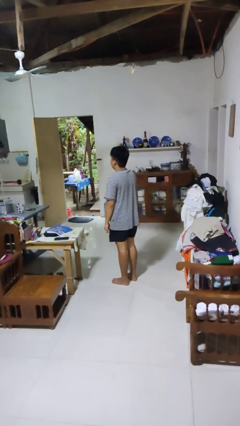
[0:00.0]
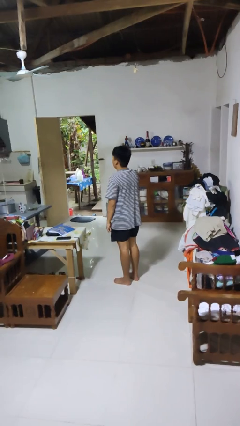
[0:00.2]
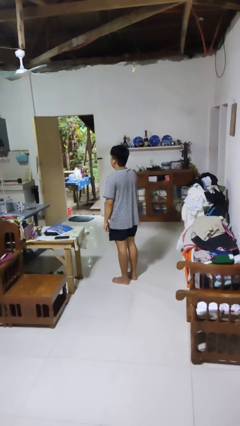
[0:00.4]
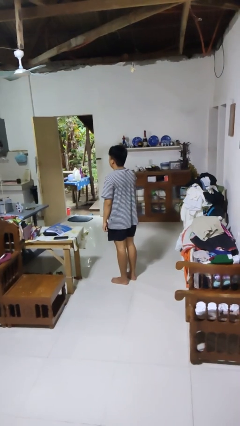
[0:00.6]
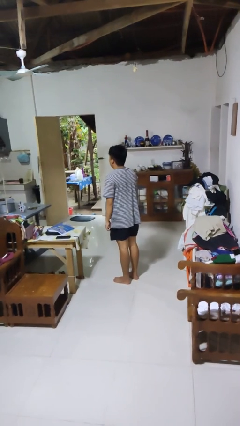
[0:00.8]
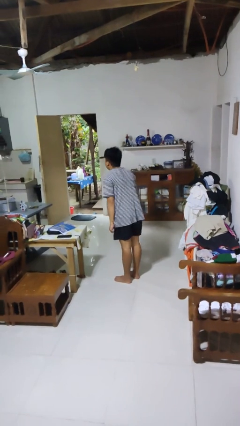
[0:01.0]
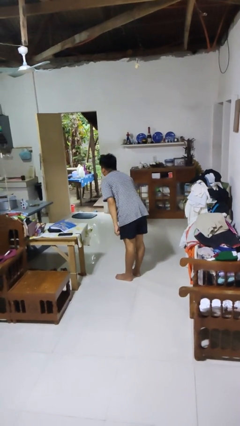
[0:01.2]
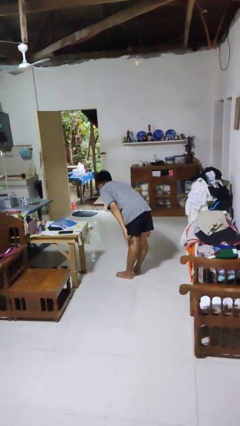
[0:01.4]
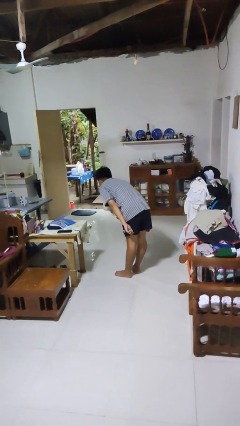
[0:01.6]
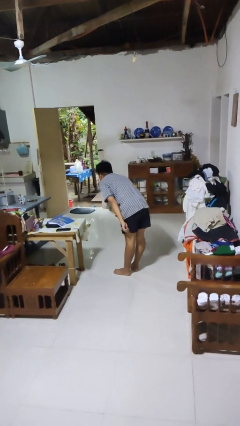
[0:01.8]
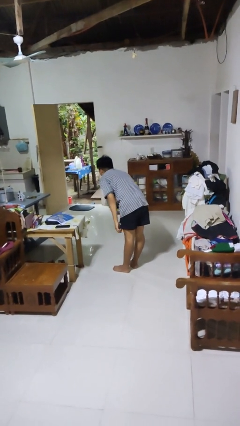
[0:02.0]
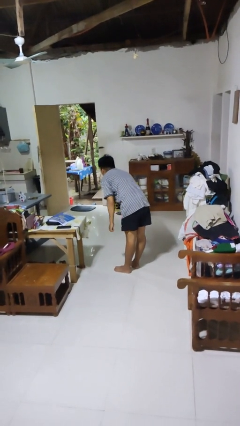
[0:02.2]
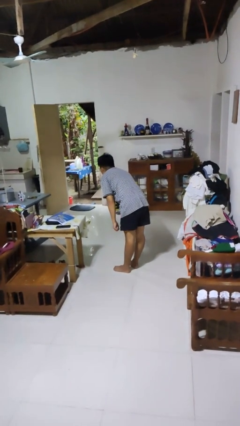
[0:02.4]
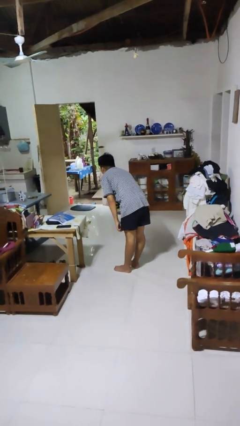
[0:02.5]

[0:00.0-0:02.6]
person bows

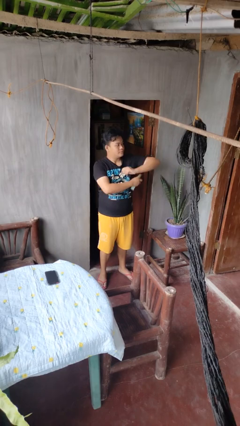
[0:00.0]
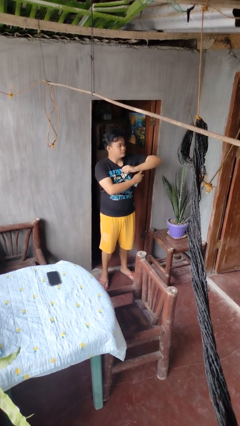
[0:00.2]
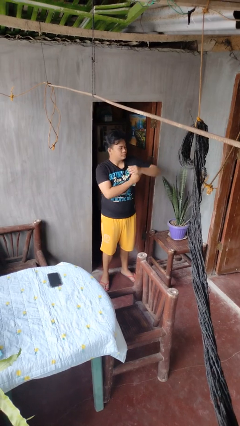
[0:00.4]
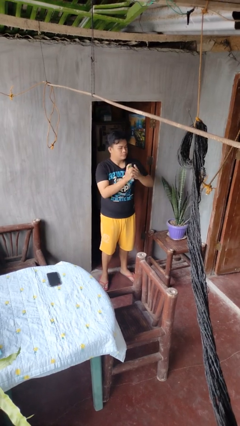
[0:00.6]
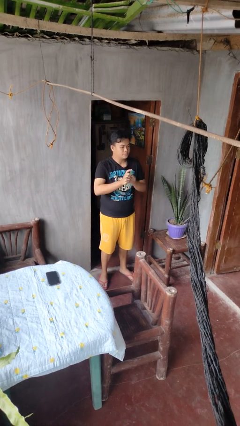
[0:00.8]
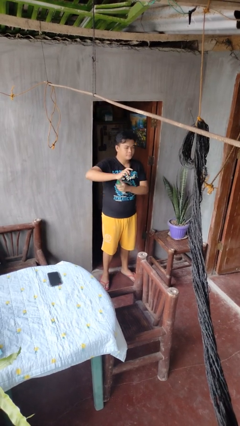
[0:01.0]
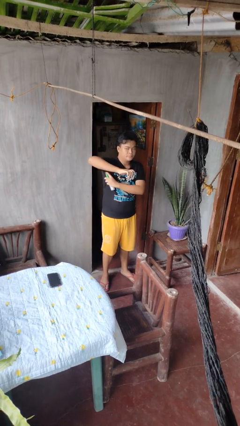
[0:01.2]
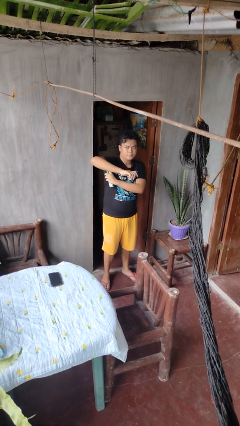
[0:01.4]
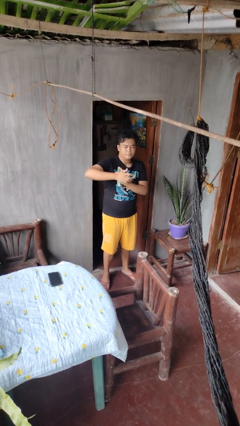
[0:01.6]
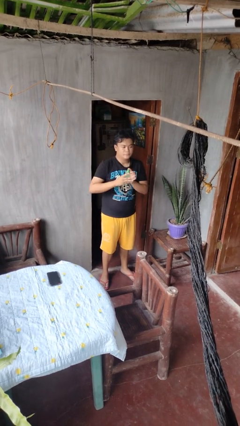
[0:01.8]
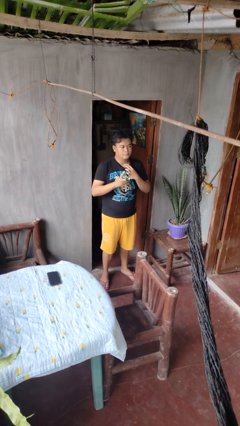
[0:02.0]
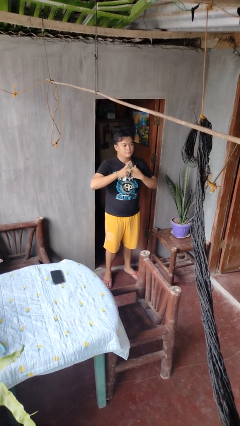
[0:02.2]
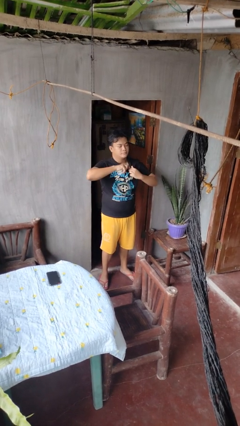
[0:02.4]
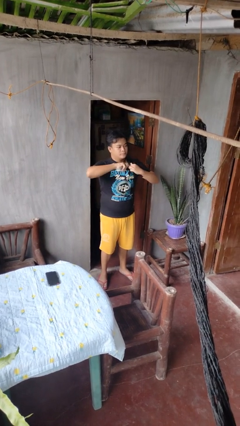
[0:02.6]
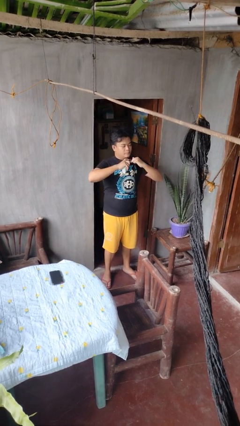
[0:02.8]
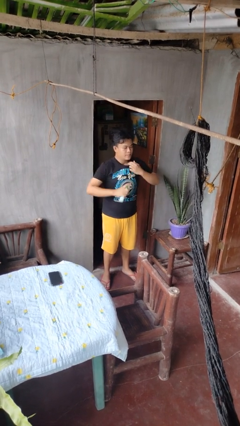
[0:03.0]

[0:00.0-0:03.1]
person applies deodorant

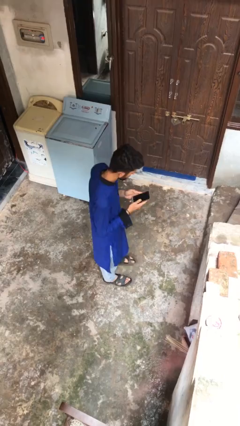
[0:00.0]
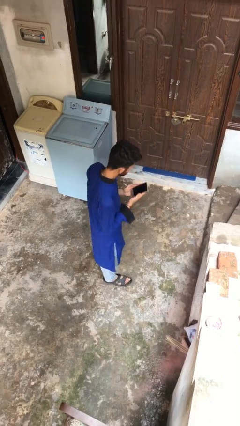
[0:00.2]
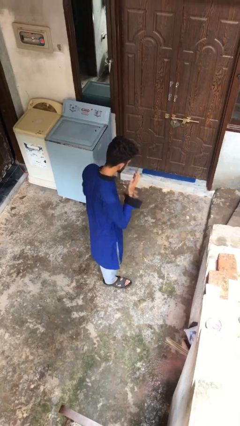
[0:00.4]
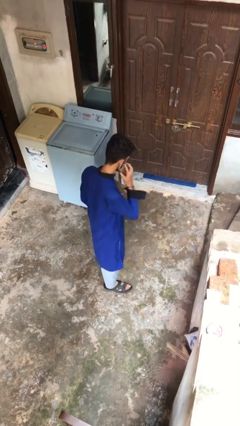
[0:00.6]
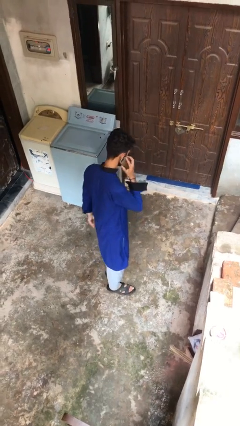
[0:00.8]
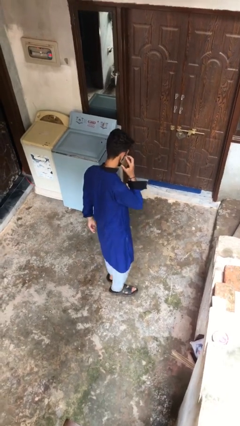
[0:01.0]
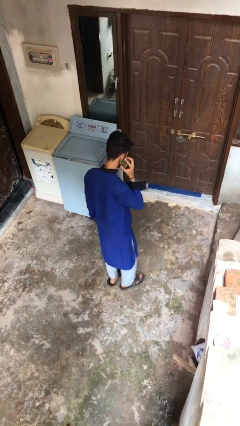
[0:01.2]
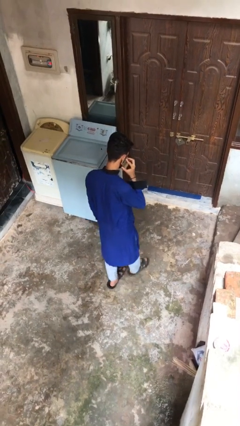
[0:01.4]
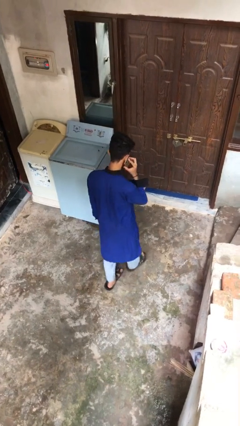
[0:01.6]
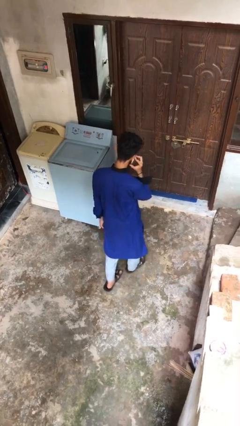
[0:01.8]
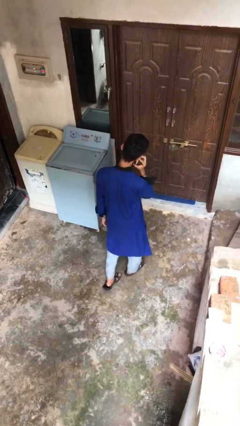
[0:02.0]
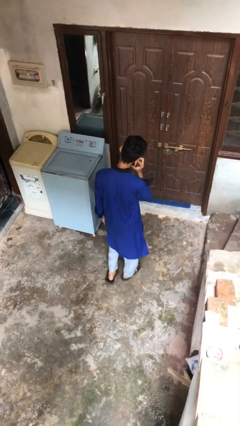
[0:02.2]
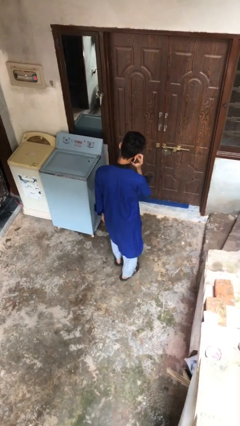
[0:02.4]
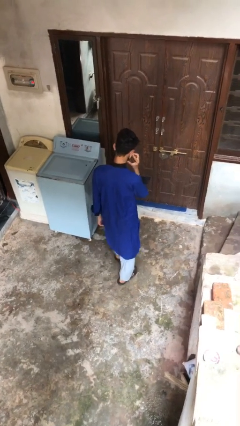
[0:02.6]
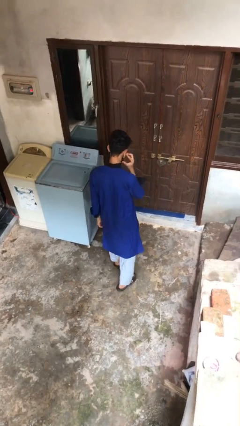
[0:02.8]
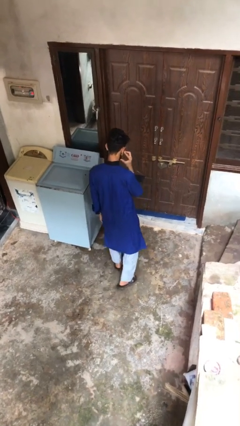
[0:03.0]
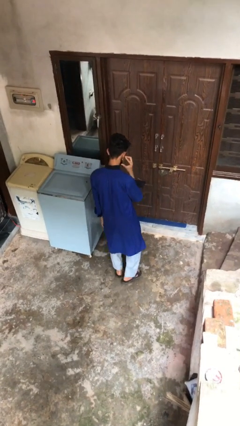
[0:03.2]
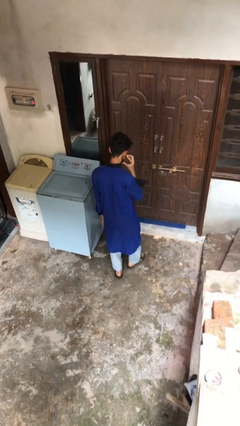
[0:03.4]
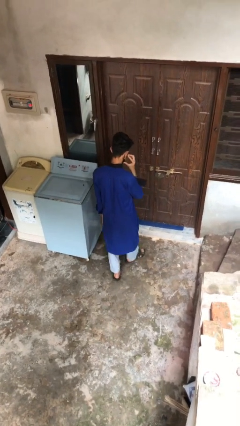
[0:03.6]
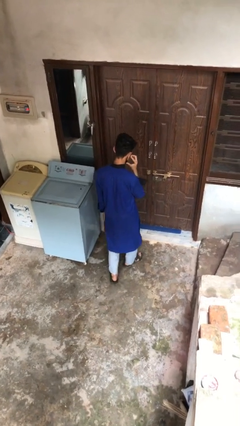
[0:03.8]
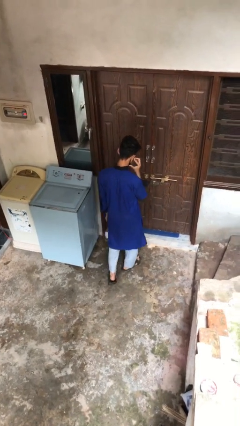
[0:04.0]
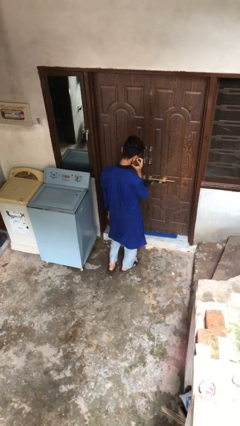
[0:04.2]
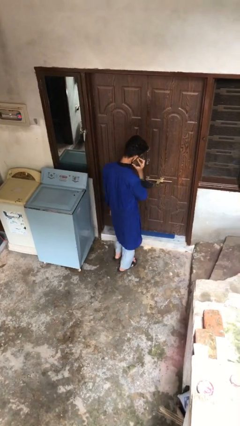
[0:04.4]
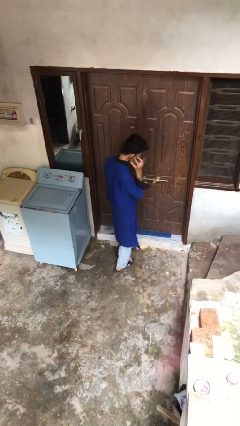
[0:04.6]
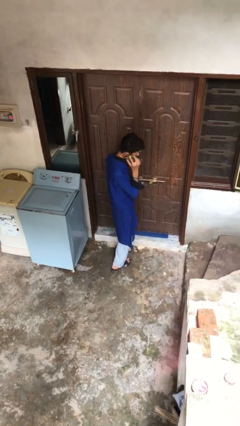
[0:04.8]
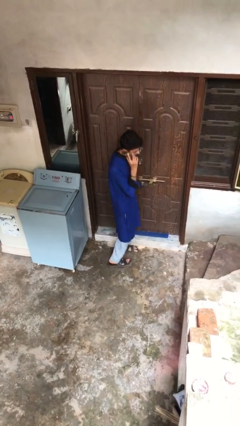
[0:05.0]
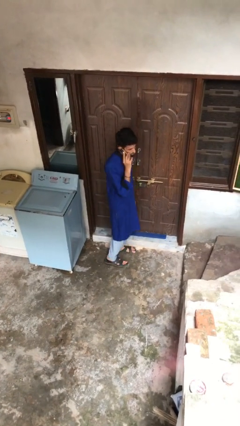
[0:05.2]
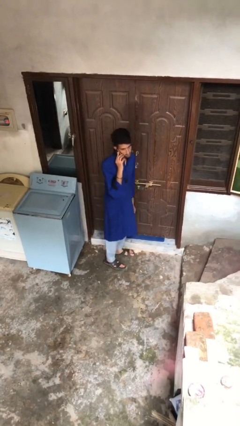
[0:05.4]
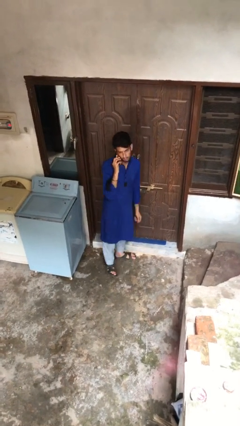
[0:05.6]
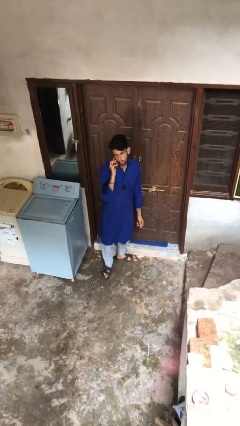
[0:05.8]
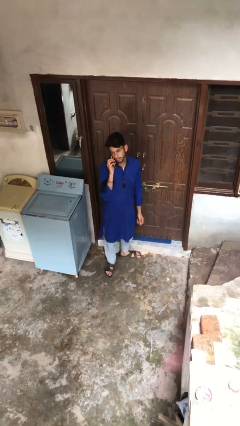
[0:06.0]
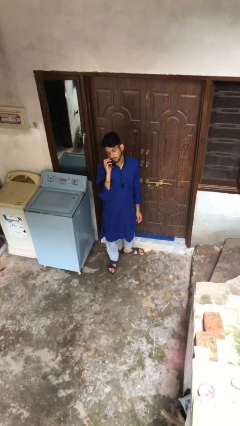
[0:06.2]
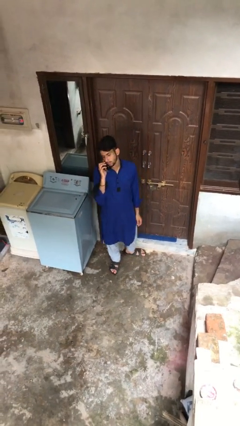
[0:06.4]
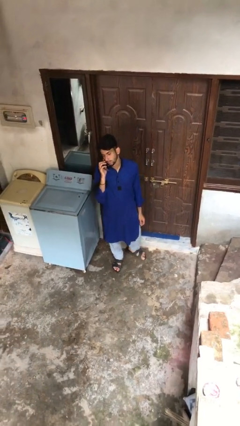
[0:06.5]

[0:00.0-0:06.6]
person talks on phone

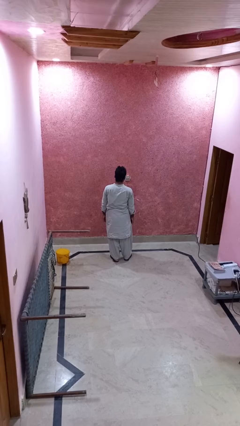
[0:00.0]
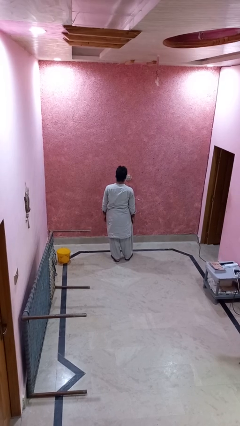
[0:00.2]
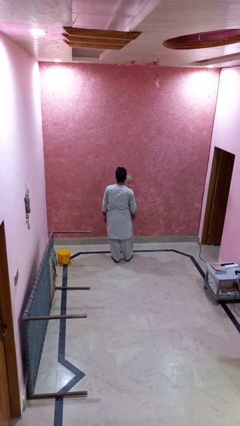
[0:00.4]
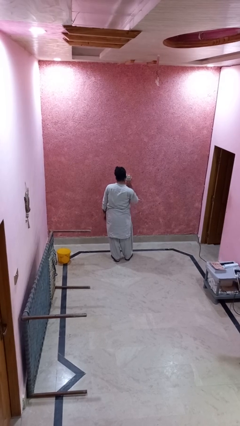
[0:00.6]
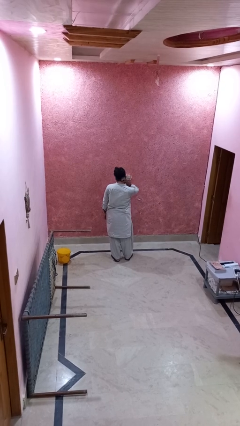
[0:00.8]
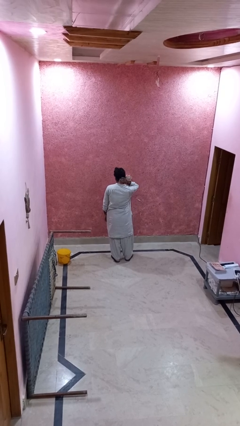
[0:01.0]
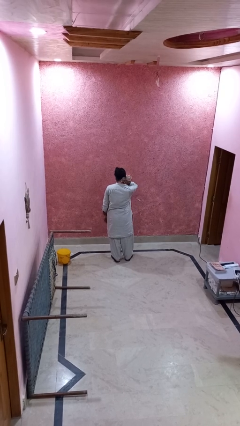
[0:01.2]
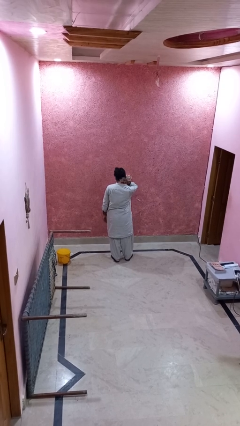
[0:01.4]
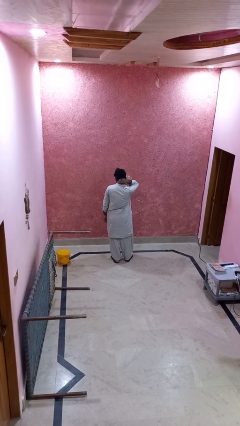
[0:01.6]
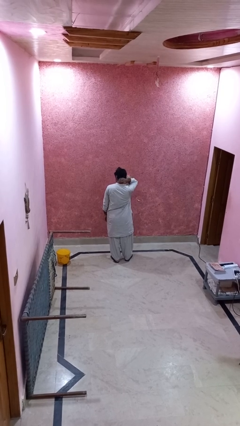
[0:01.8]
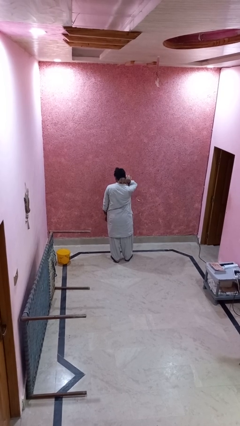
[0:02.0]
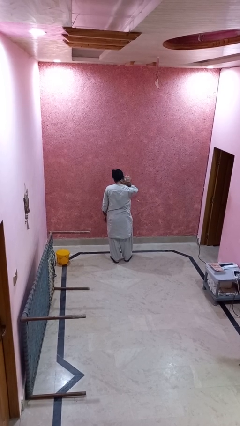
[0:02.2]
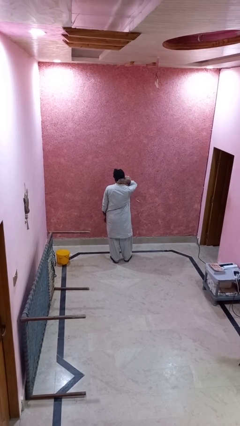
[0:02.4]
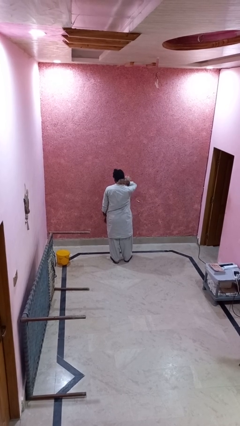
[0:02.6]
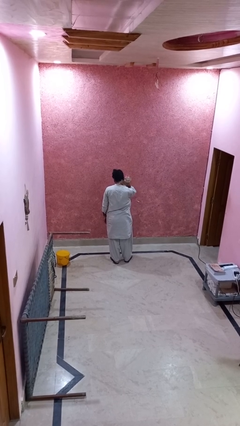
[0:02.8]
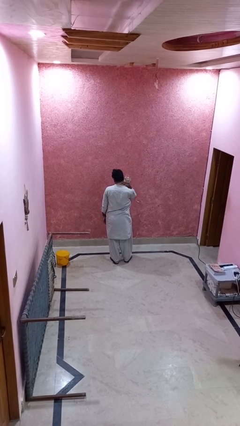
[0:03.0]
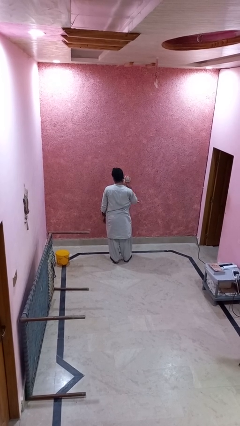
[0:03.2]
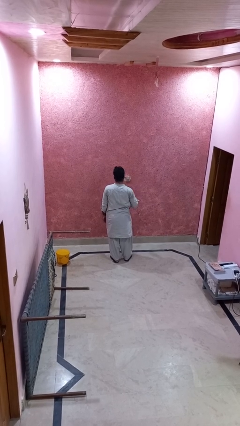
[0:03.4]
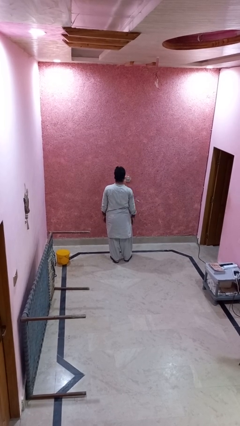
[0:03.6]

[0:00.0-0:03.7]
person rubs neck

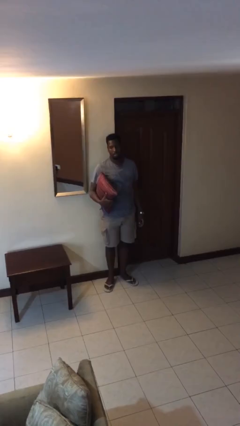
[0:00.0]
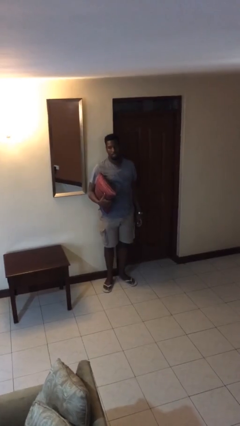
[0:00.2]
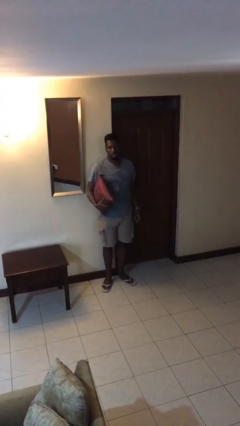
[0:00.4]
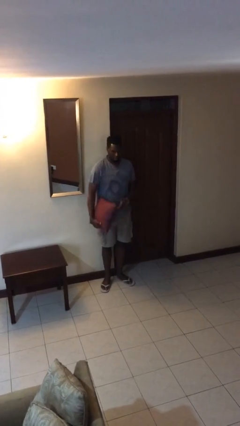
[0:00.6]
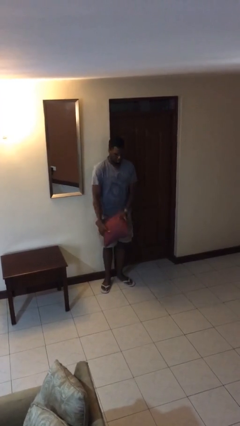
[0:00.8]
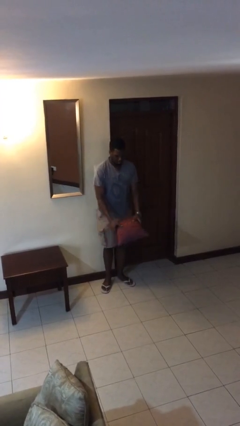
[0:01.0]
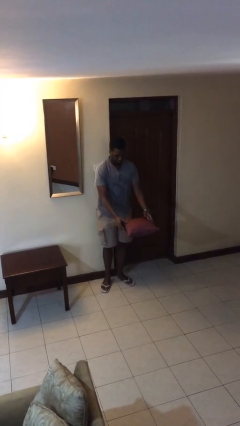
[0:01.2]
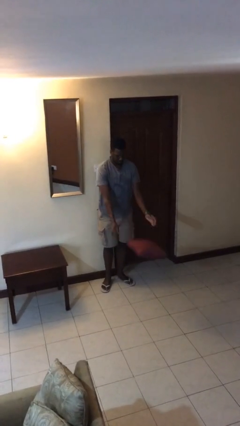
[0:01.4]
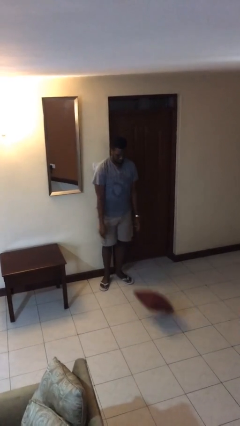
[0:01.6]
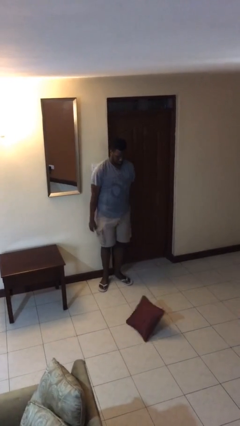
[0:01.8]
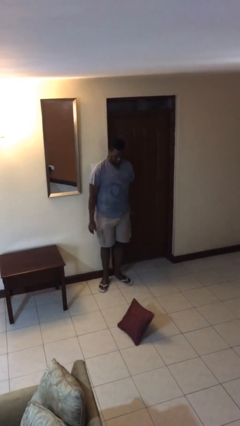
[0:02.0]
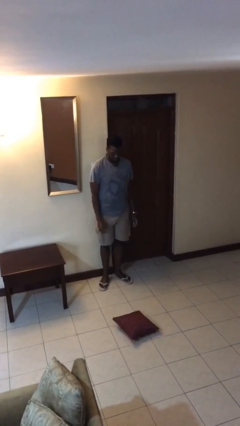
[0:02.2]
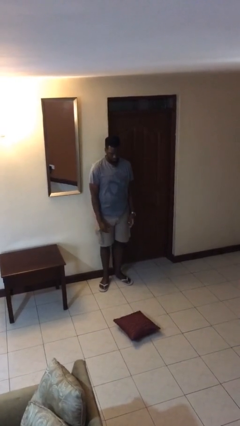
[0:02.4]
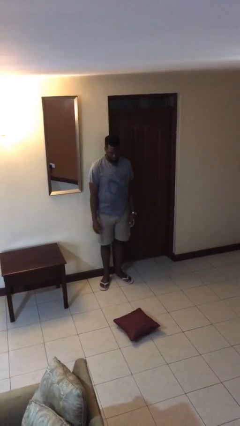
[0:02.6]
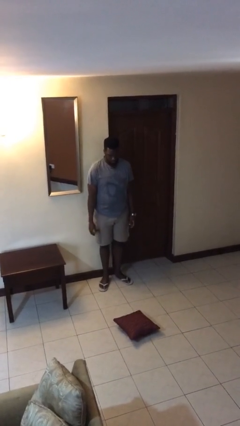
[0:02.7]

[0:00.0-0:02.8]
person throws object to ground
